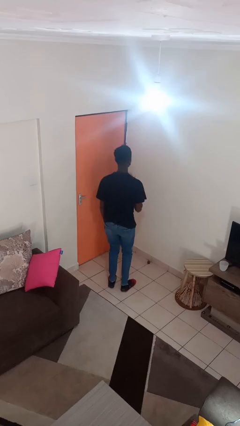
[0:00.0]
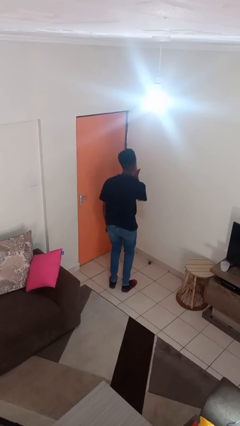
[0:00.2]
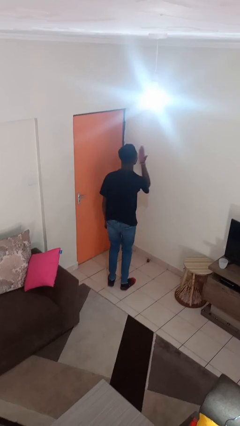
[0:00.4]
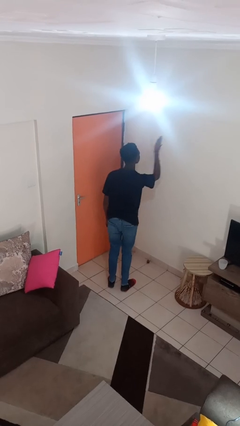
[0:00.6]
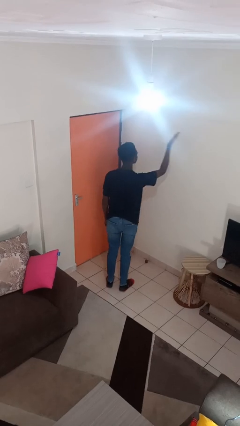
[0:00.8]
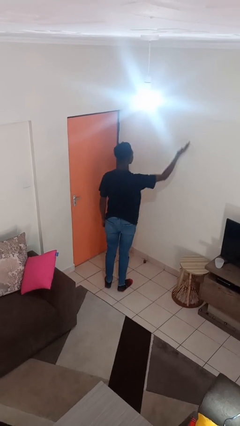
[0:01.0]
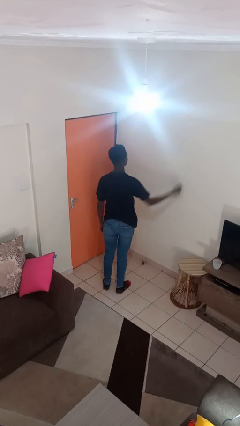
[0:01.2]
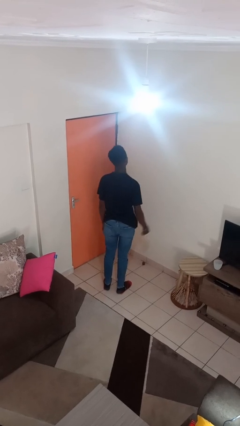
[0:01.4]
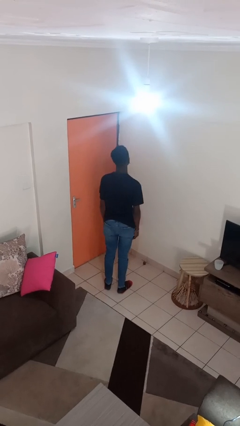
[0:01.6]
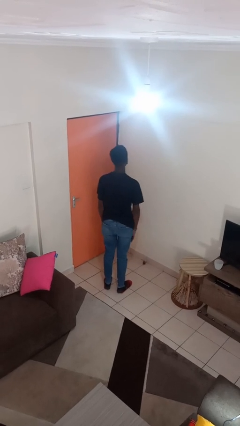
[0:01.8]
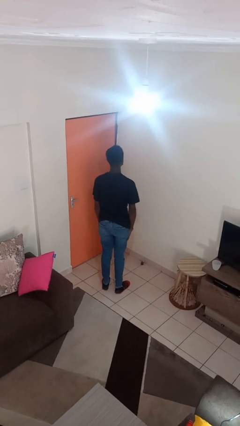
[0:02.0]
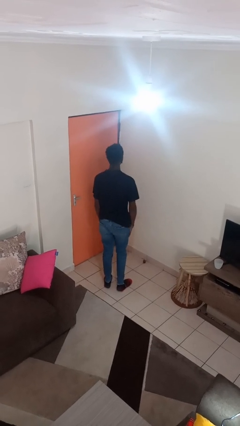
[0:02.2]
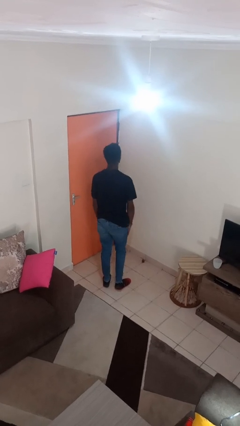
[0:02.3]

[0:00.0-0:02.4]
person gestures blow kiss

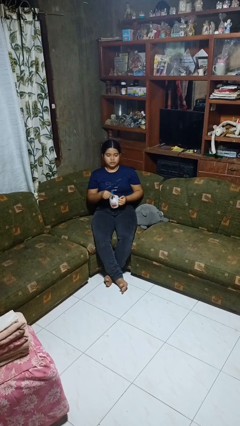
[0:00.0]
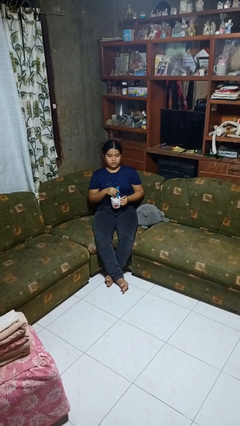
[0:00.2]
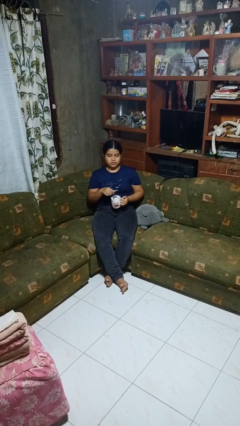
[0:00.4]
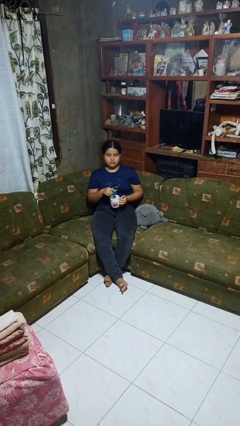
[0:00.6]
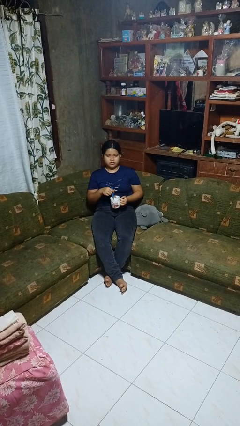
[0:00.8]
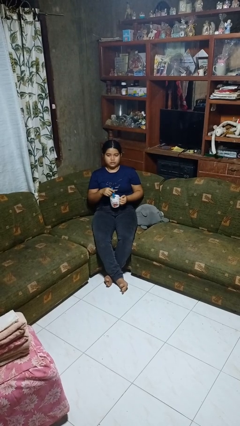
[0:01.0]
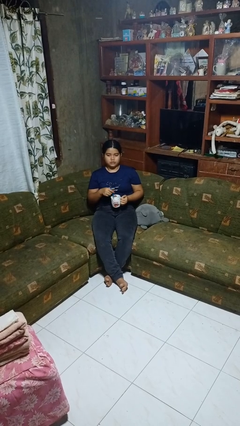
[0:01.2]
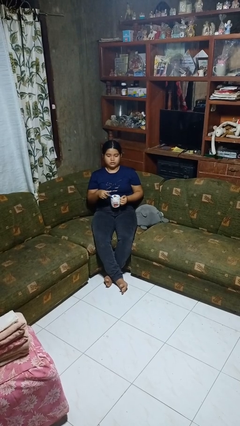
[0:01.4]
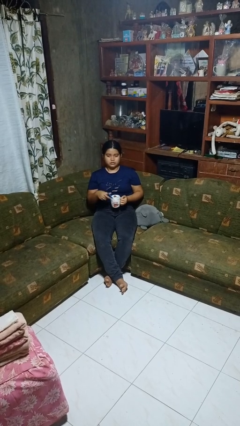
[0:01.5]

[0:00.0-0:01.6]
person stirs mug

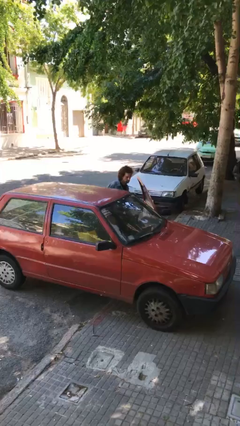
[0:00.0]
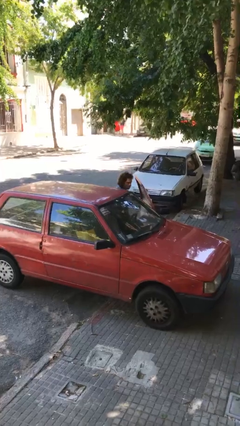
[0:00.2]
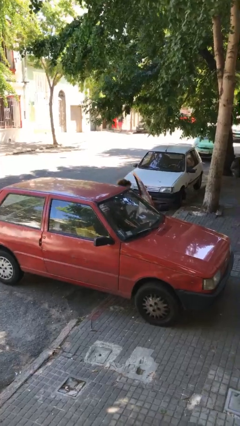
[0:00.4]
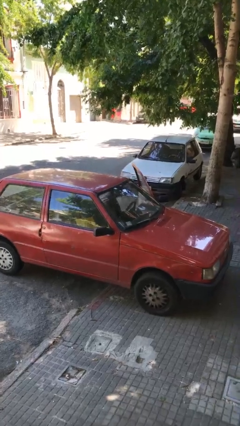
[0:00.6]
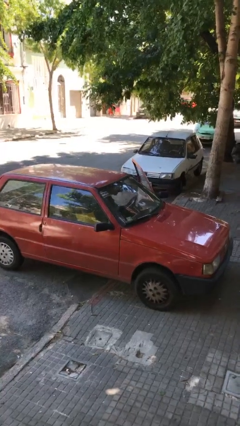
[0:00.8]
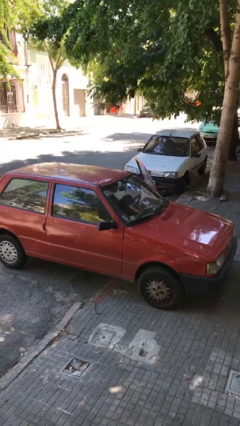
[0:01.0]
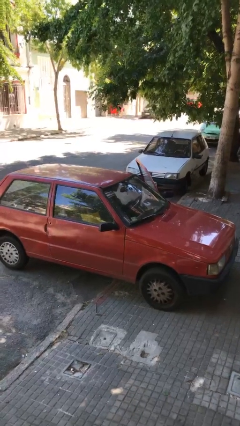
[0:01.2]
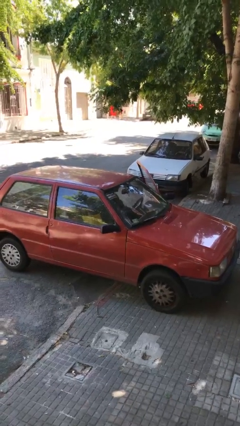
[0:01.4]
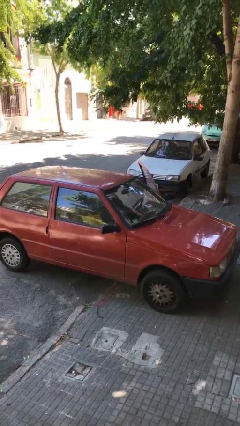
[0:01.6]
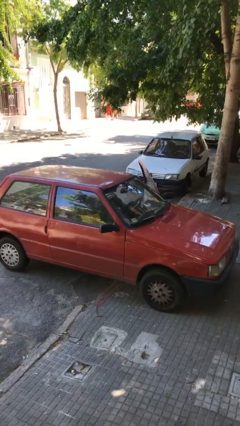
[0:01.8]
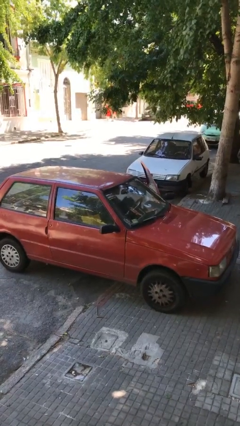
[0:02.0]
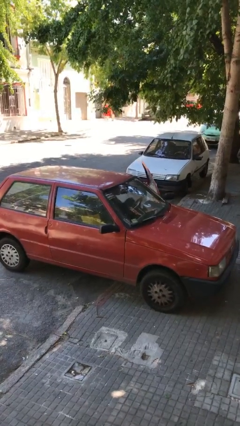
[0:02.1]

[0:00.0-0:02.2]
person enters car

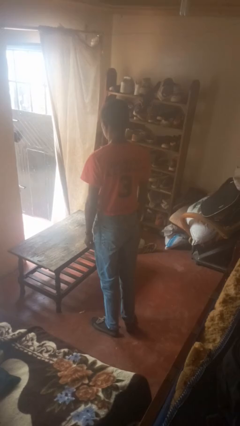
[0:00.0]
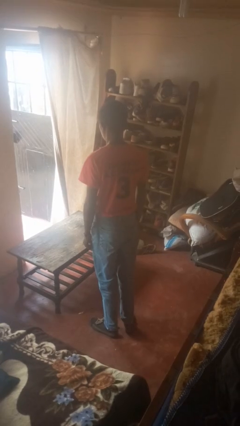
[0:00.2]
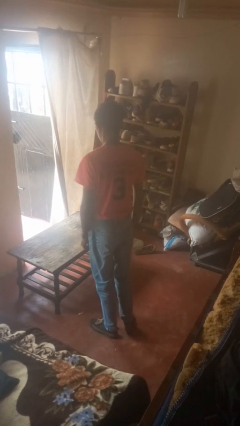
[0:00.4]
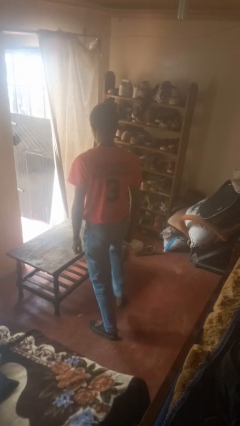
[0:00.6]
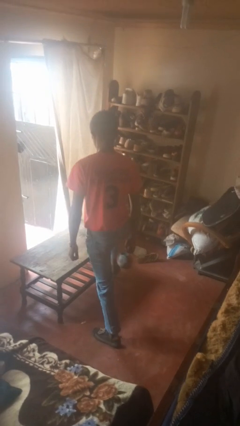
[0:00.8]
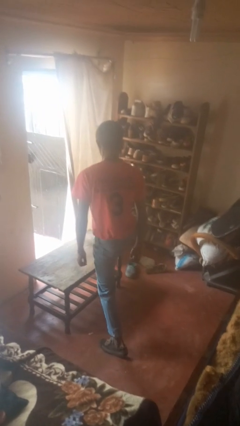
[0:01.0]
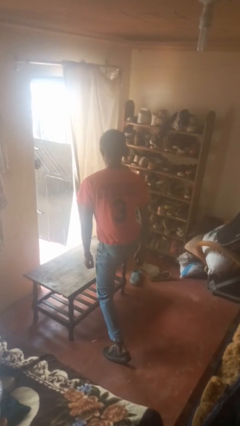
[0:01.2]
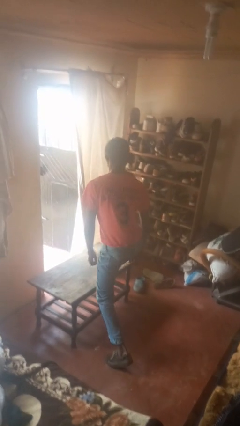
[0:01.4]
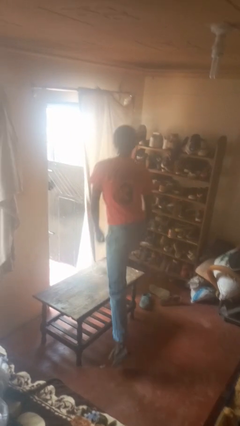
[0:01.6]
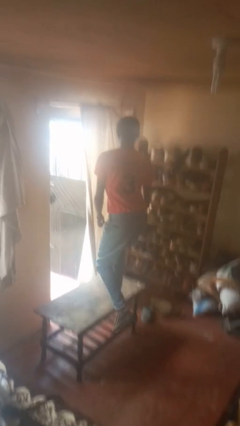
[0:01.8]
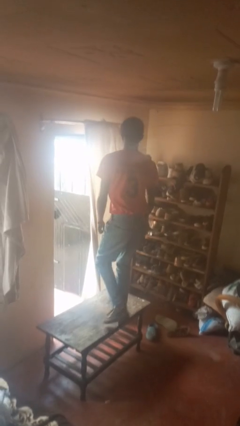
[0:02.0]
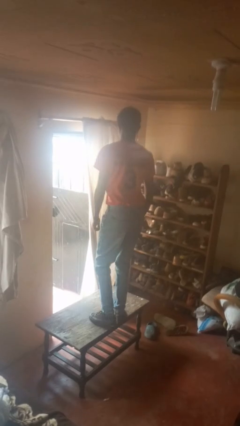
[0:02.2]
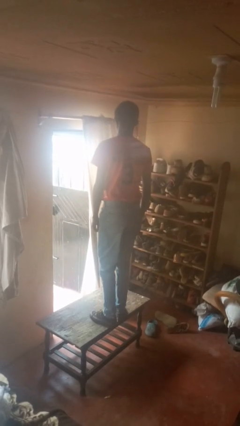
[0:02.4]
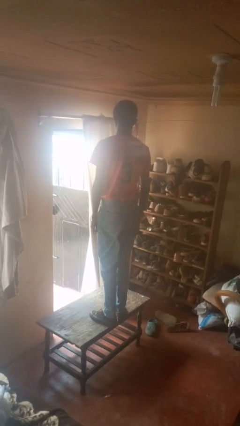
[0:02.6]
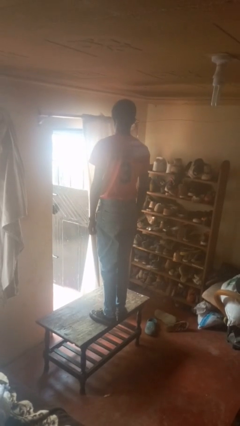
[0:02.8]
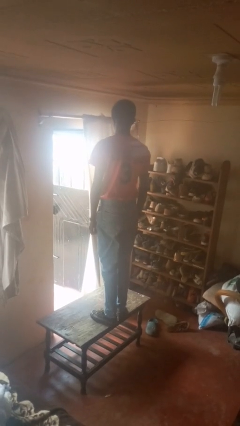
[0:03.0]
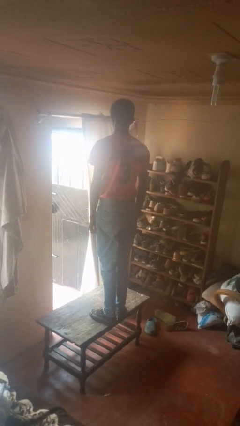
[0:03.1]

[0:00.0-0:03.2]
person climbs on table

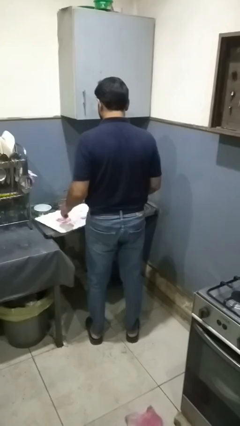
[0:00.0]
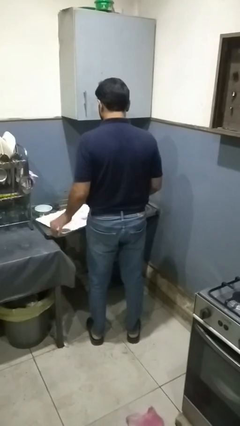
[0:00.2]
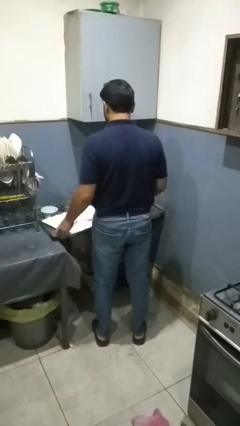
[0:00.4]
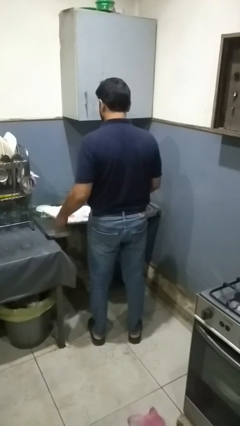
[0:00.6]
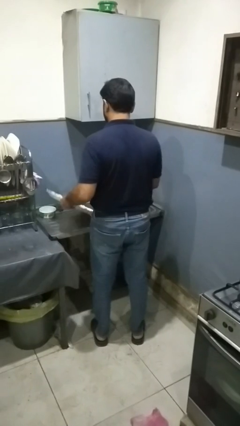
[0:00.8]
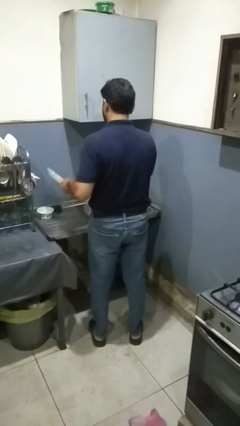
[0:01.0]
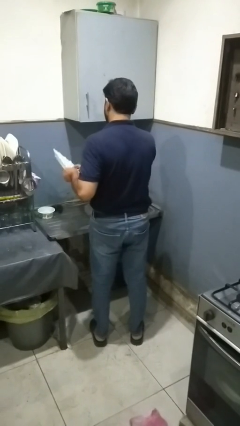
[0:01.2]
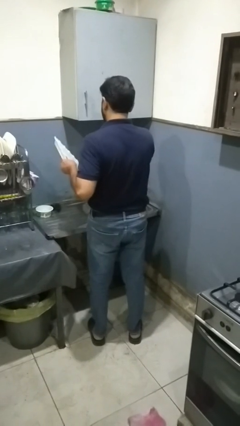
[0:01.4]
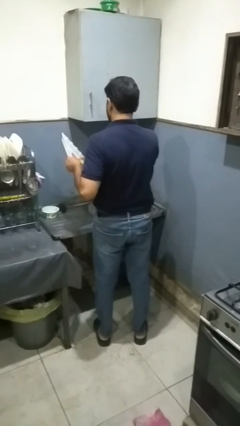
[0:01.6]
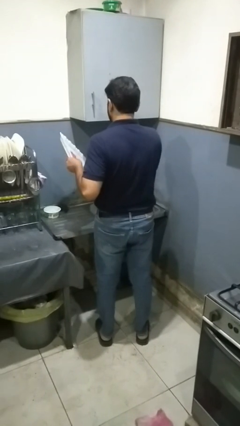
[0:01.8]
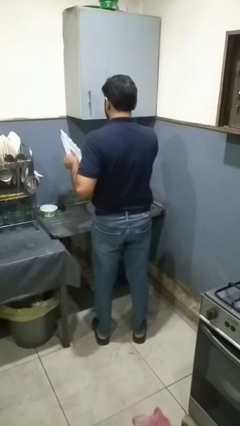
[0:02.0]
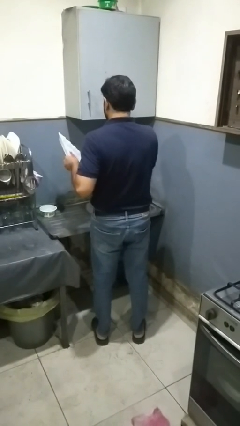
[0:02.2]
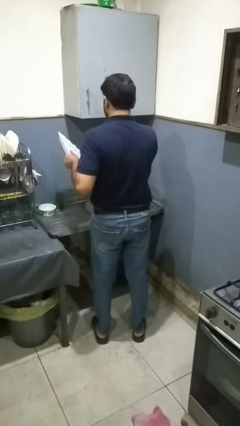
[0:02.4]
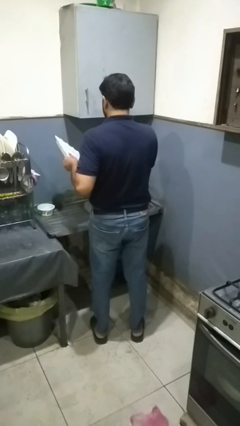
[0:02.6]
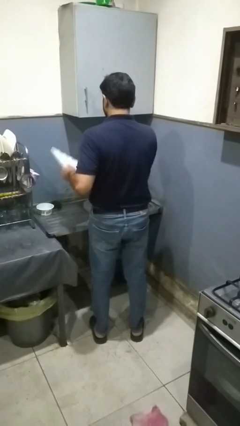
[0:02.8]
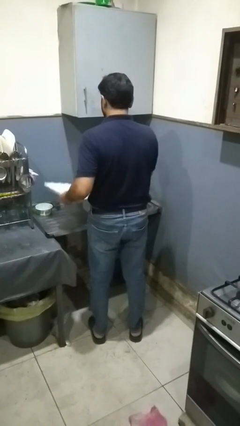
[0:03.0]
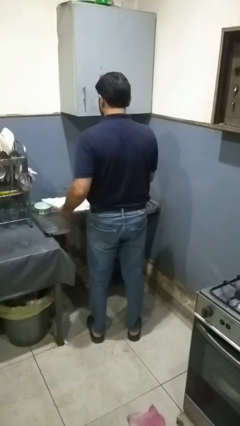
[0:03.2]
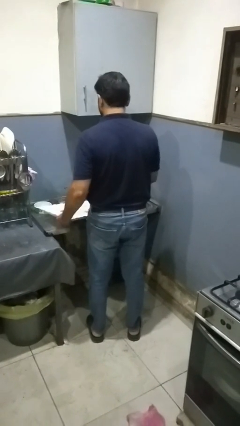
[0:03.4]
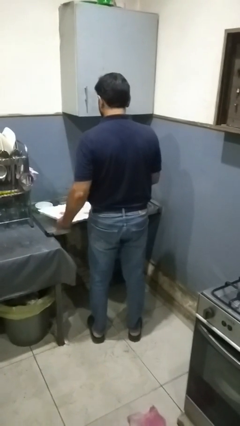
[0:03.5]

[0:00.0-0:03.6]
person washes dish

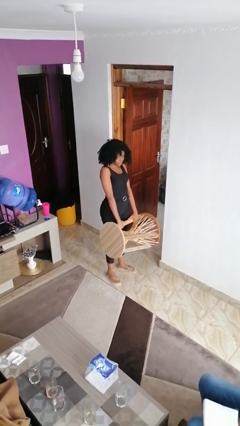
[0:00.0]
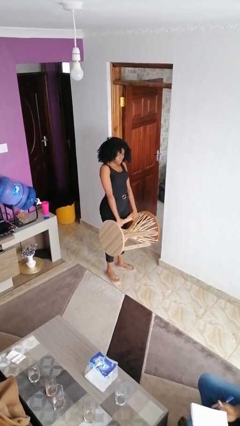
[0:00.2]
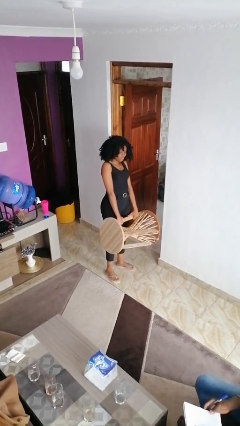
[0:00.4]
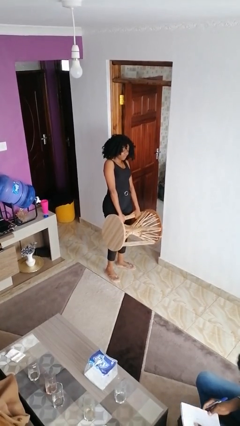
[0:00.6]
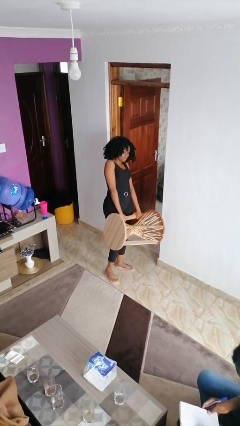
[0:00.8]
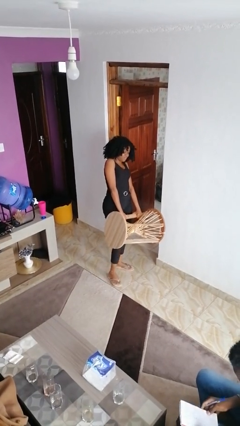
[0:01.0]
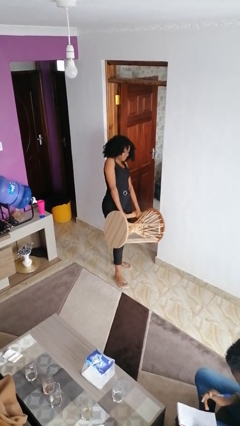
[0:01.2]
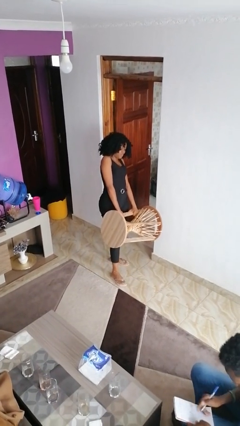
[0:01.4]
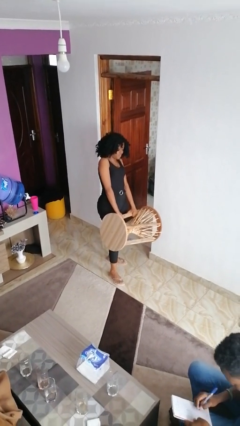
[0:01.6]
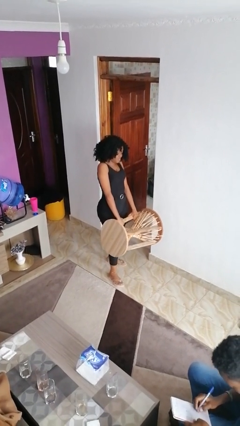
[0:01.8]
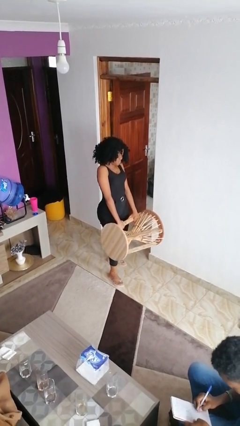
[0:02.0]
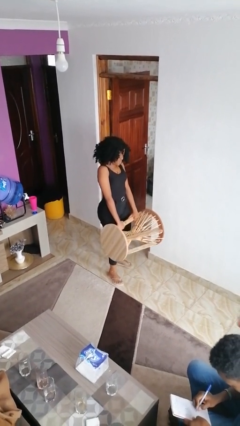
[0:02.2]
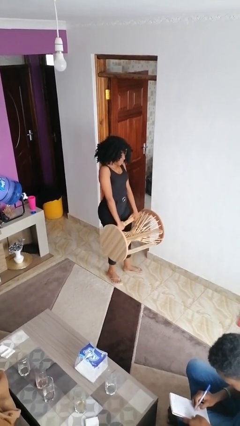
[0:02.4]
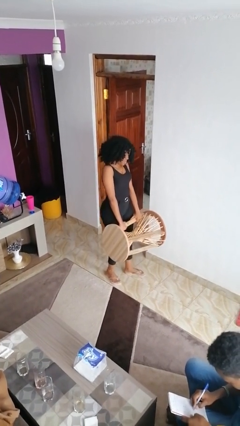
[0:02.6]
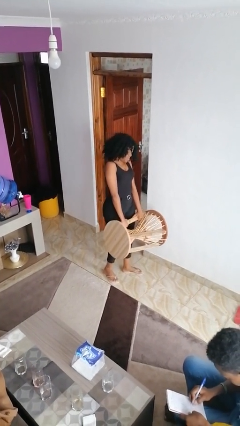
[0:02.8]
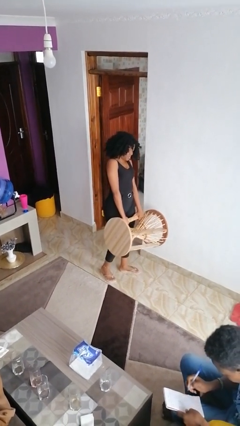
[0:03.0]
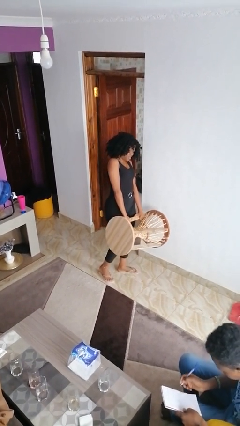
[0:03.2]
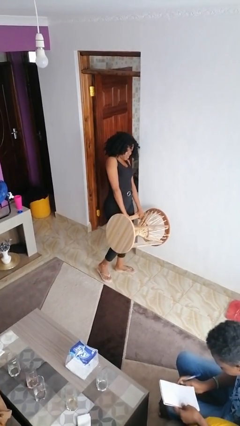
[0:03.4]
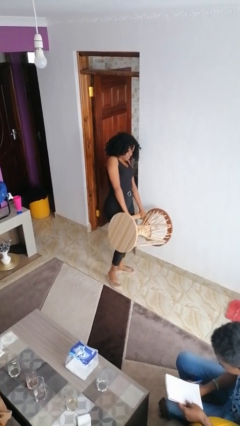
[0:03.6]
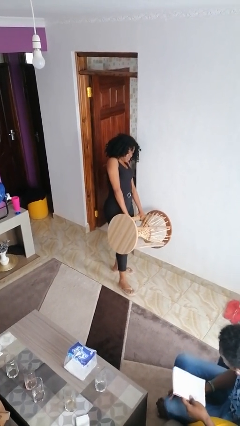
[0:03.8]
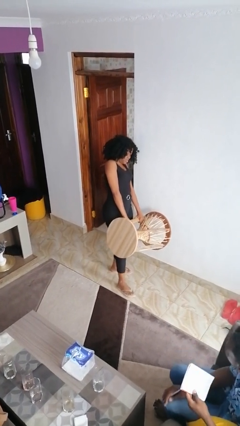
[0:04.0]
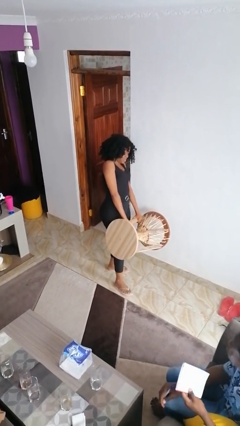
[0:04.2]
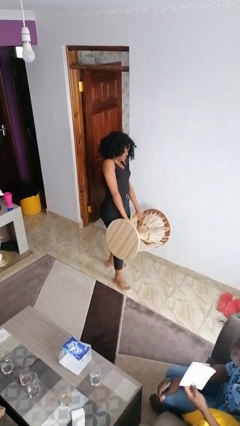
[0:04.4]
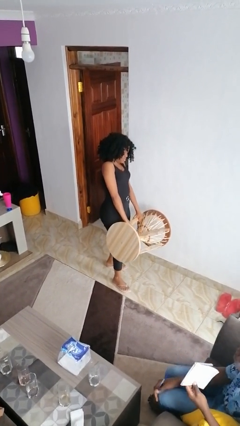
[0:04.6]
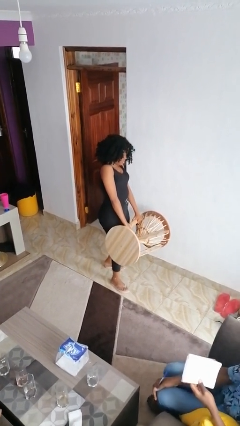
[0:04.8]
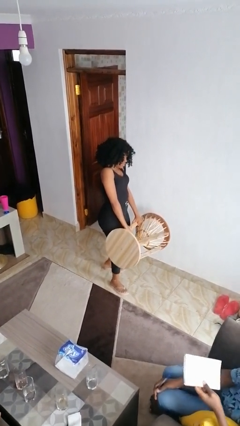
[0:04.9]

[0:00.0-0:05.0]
person carries furniture
